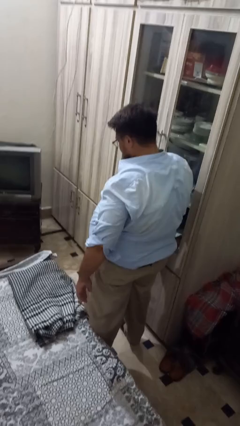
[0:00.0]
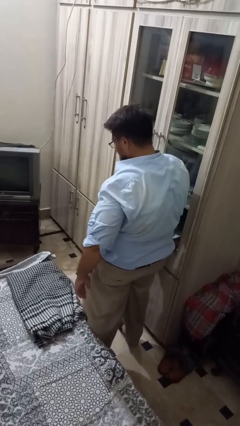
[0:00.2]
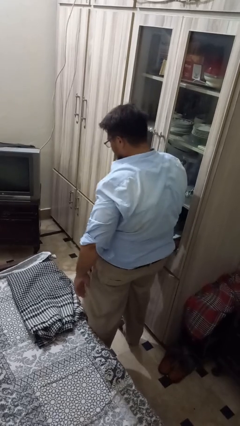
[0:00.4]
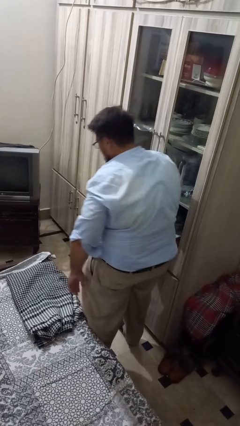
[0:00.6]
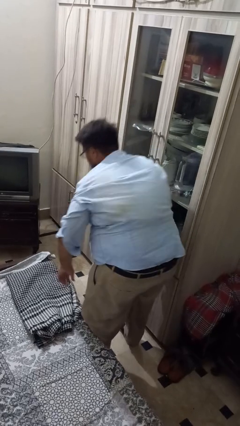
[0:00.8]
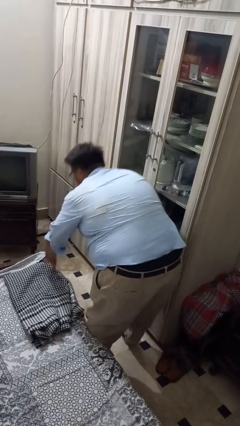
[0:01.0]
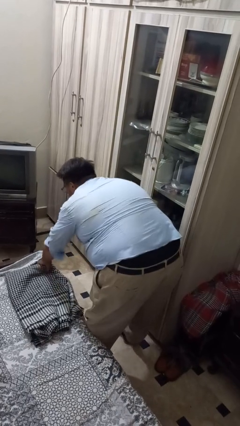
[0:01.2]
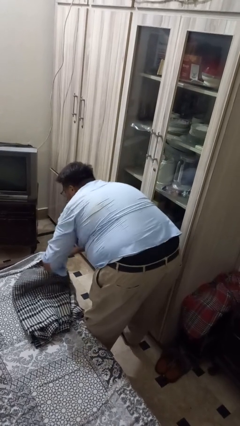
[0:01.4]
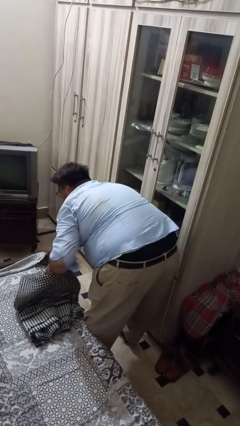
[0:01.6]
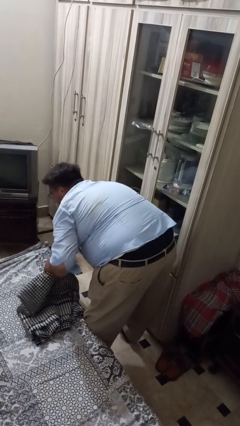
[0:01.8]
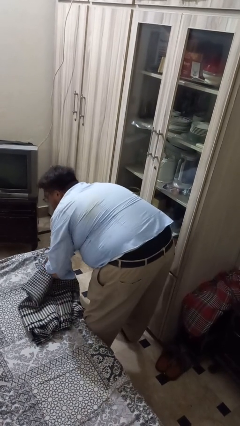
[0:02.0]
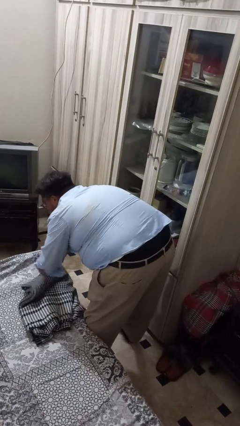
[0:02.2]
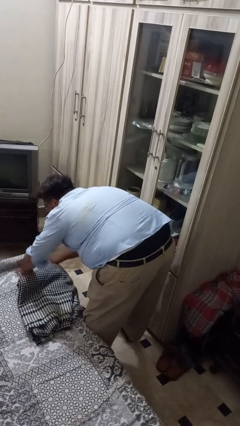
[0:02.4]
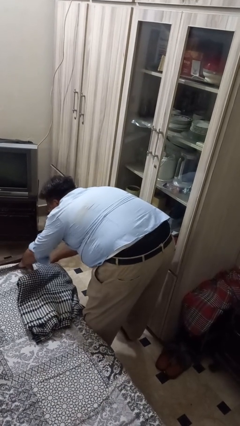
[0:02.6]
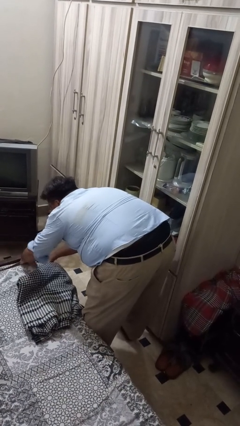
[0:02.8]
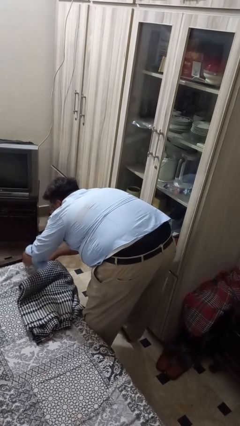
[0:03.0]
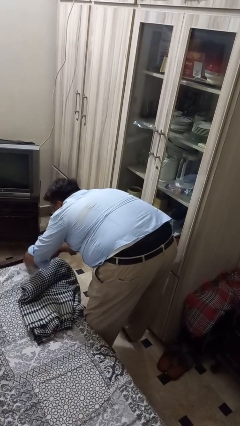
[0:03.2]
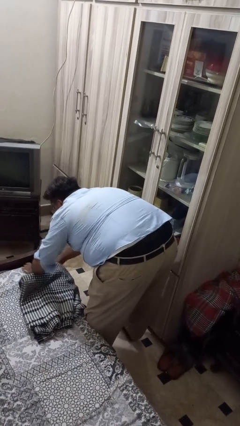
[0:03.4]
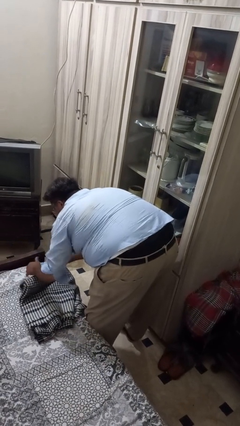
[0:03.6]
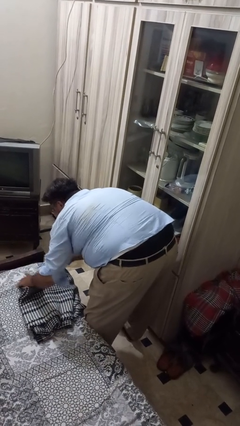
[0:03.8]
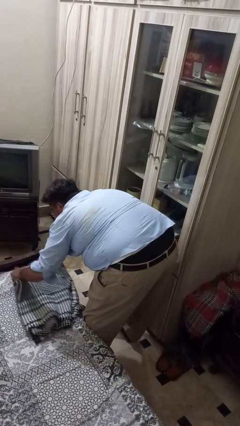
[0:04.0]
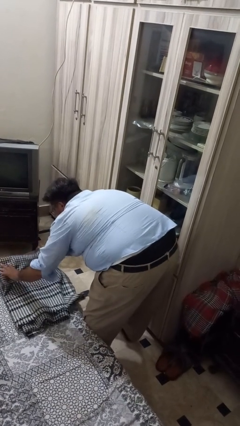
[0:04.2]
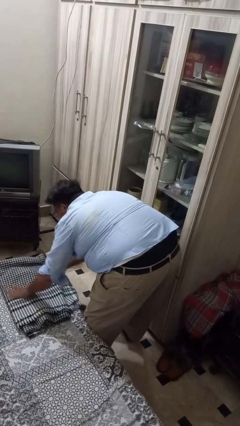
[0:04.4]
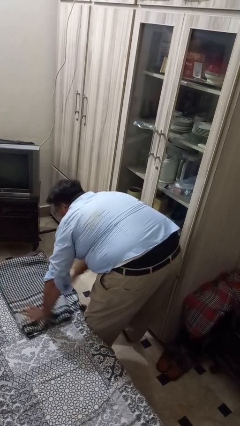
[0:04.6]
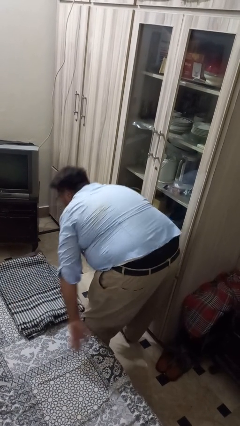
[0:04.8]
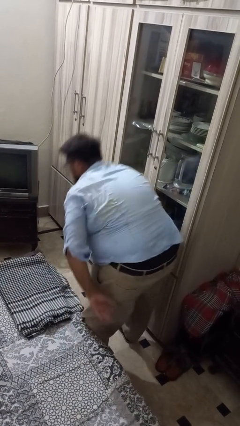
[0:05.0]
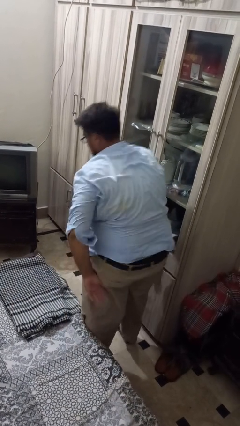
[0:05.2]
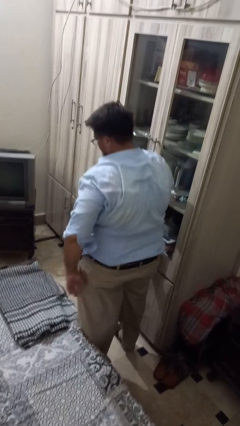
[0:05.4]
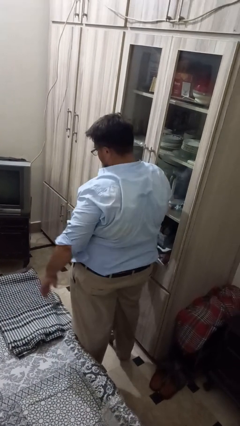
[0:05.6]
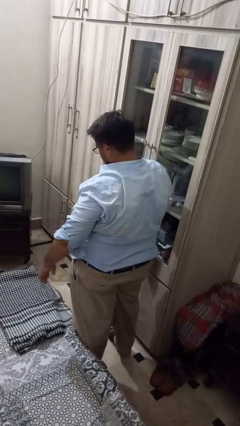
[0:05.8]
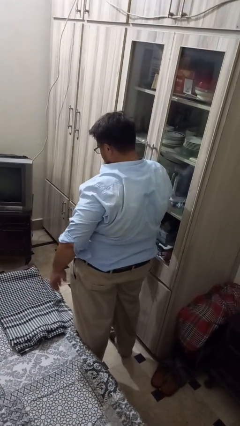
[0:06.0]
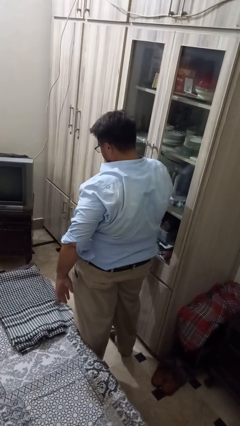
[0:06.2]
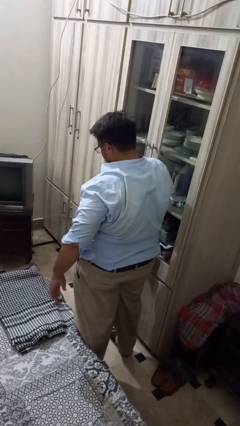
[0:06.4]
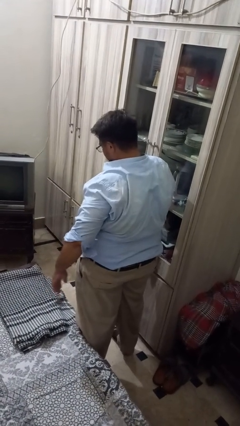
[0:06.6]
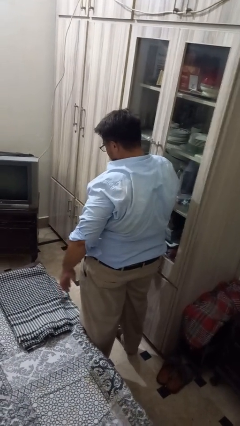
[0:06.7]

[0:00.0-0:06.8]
person makes bed

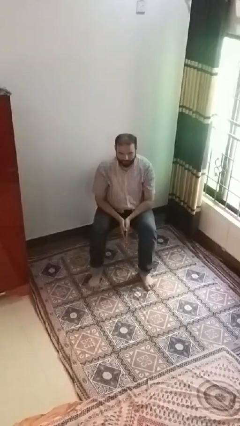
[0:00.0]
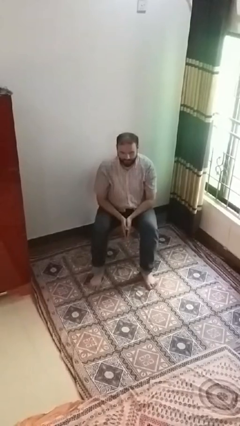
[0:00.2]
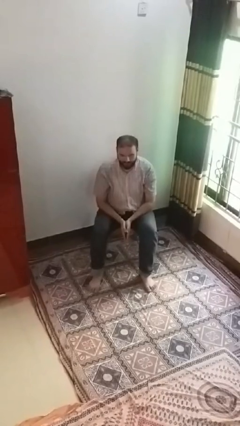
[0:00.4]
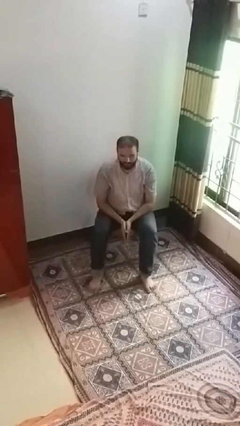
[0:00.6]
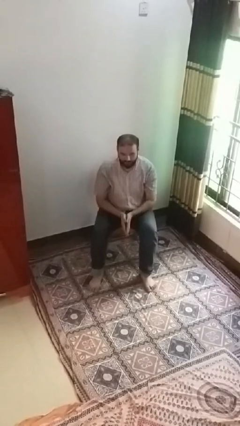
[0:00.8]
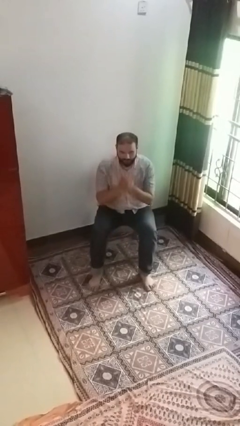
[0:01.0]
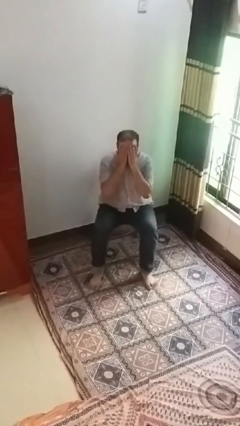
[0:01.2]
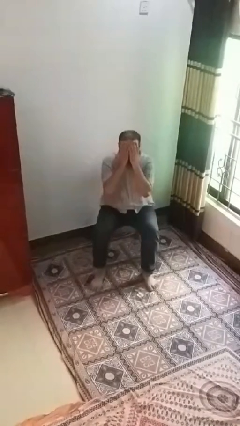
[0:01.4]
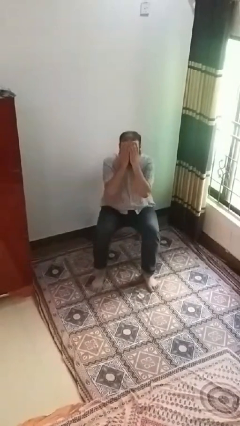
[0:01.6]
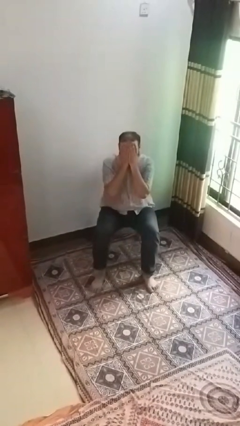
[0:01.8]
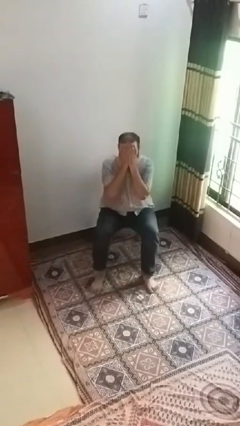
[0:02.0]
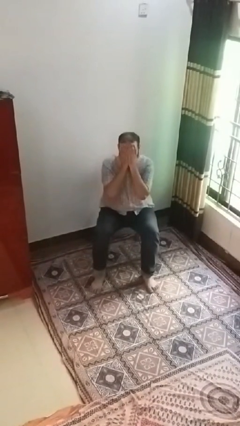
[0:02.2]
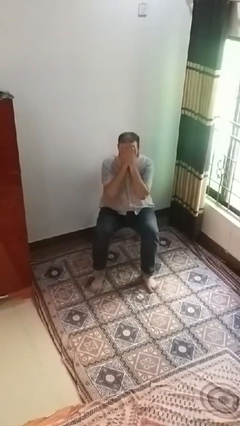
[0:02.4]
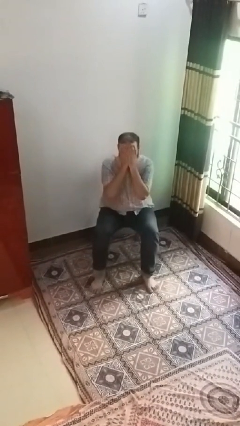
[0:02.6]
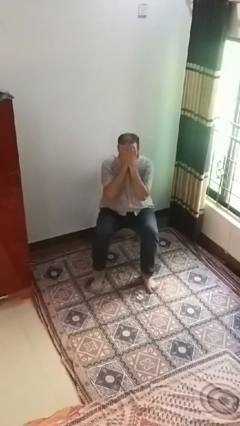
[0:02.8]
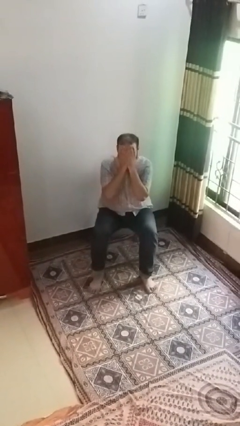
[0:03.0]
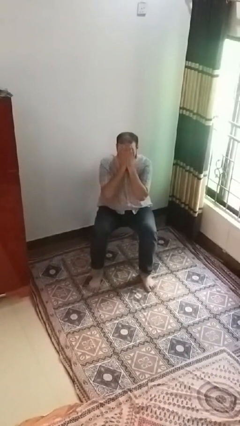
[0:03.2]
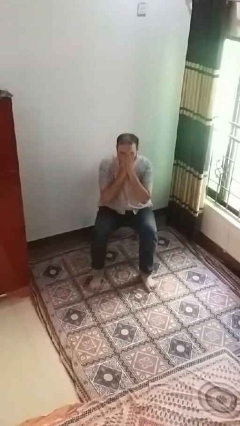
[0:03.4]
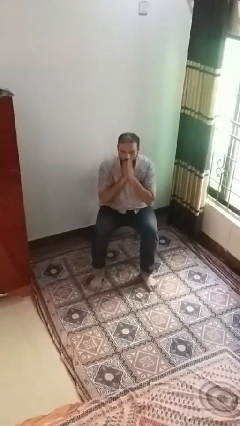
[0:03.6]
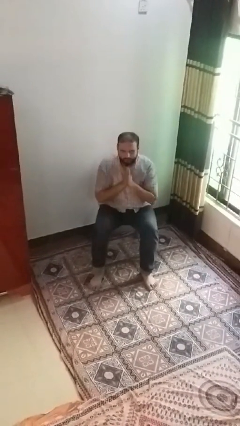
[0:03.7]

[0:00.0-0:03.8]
person covers face with hands

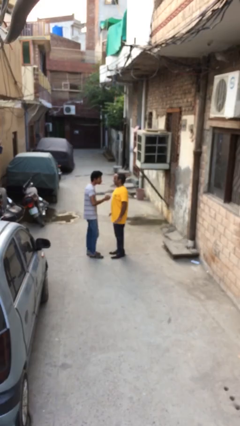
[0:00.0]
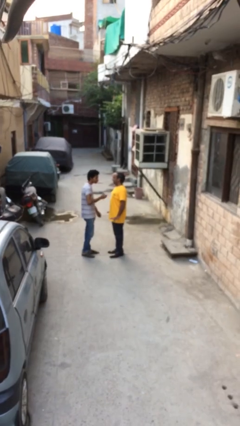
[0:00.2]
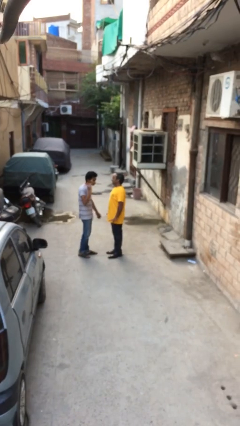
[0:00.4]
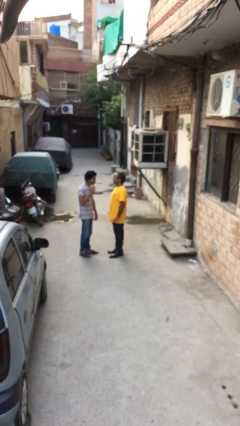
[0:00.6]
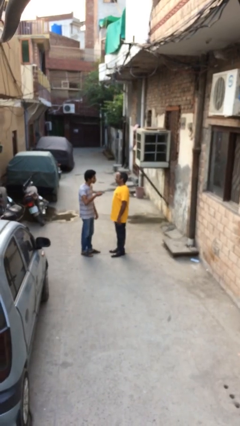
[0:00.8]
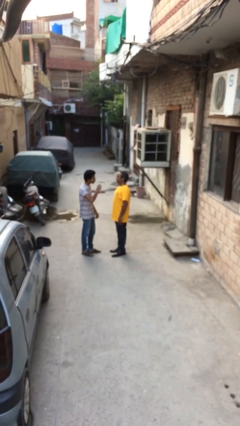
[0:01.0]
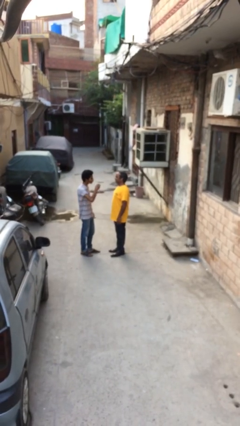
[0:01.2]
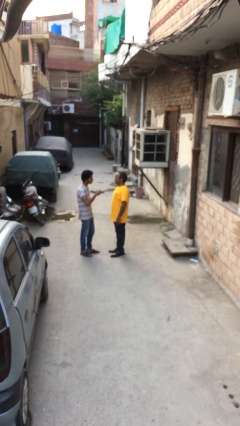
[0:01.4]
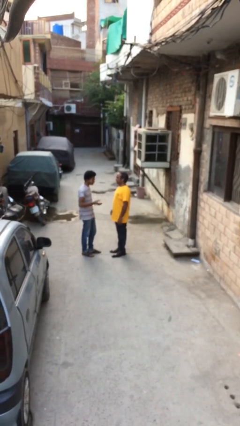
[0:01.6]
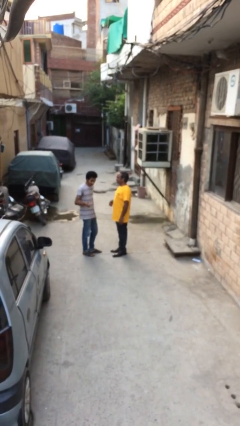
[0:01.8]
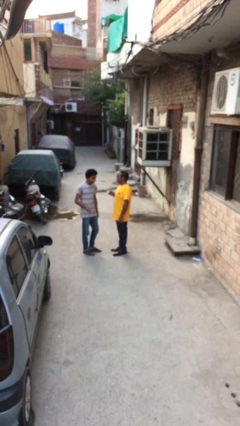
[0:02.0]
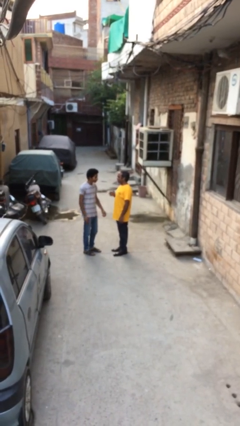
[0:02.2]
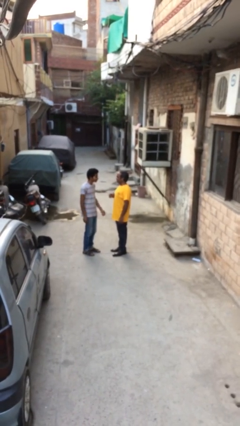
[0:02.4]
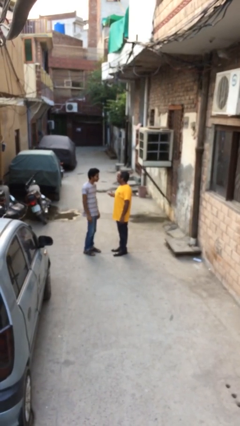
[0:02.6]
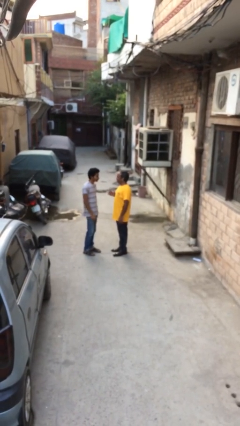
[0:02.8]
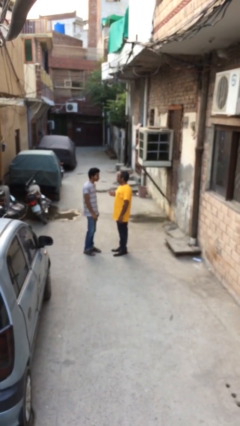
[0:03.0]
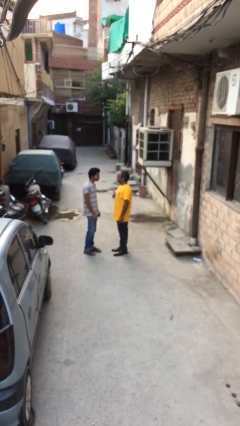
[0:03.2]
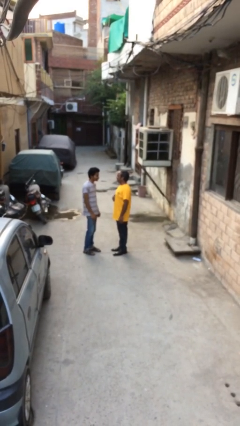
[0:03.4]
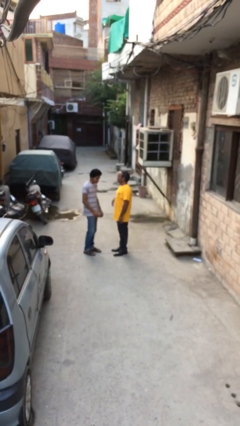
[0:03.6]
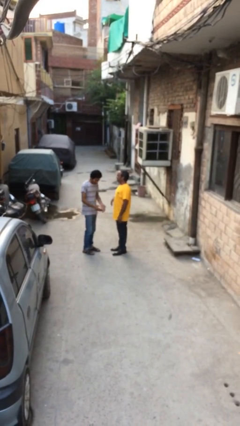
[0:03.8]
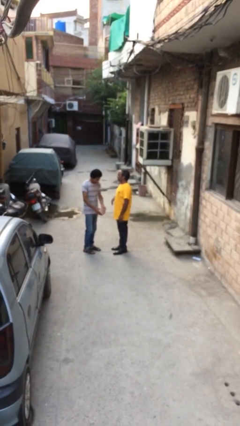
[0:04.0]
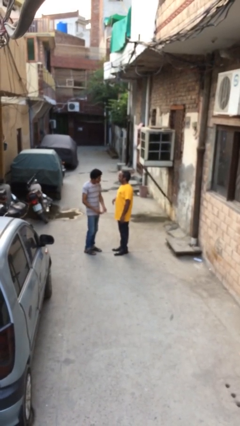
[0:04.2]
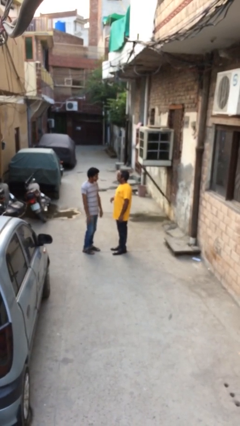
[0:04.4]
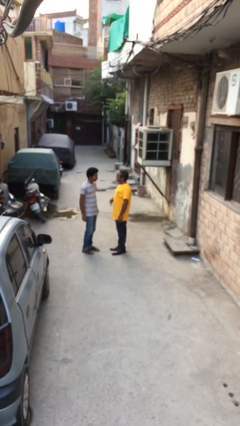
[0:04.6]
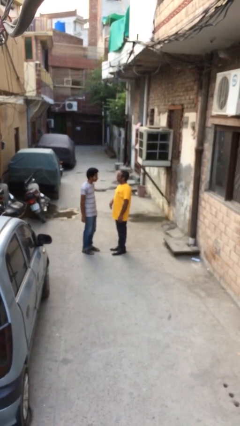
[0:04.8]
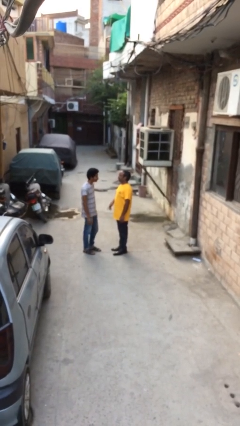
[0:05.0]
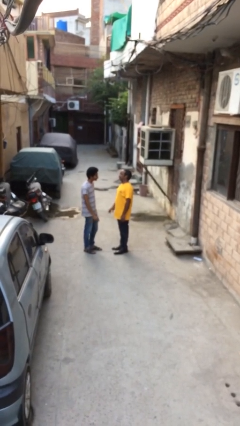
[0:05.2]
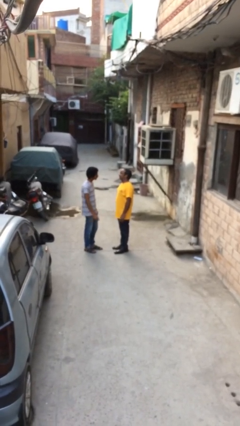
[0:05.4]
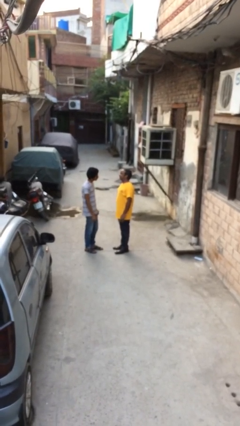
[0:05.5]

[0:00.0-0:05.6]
person talks to person

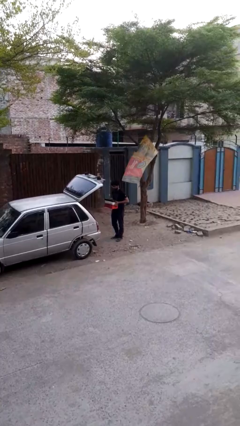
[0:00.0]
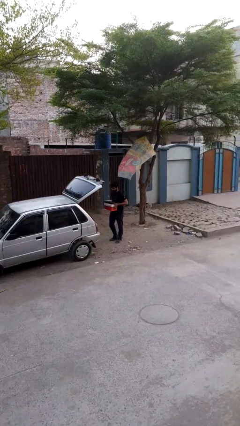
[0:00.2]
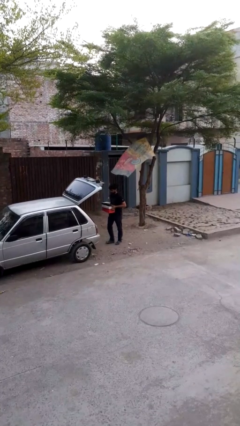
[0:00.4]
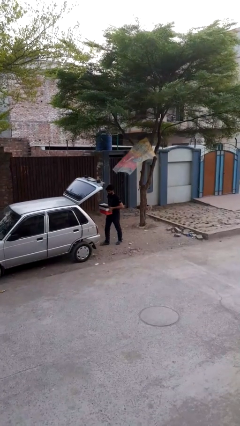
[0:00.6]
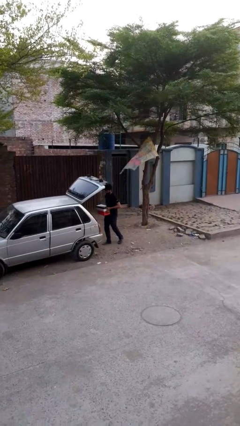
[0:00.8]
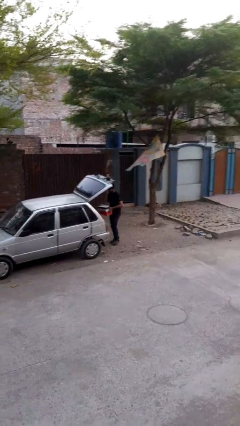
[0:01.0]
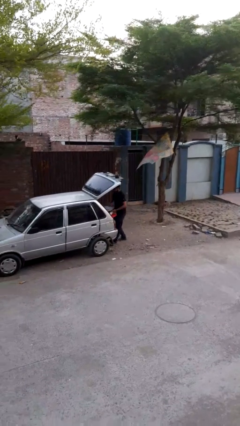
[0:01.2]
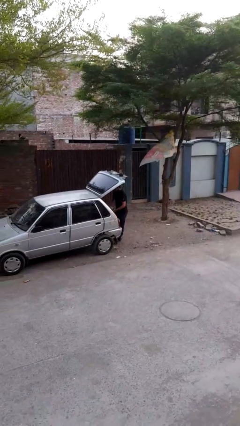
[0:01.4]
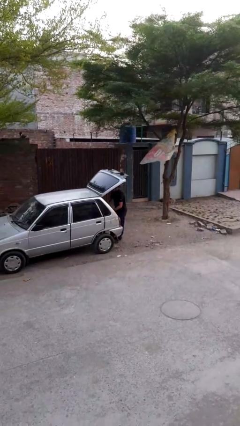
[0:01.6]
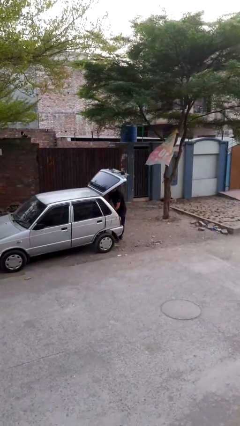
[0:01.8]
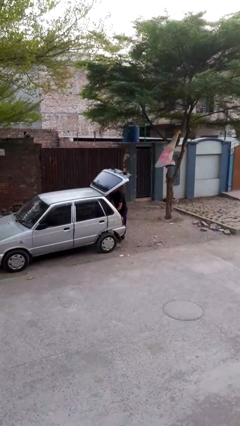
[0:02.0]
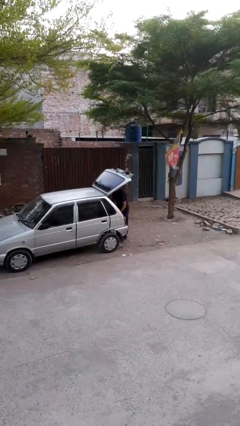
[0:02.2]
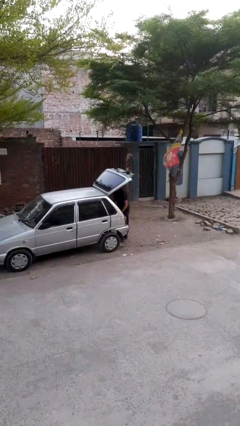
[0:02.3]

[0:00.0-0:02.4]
person loads car
